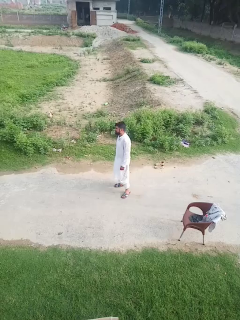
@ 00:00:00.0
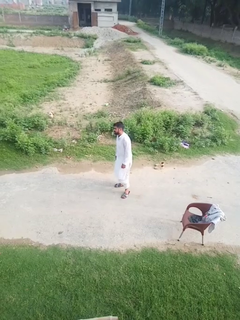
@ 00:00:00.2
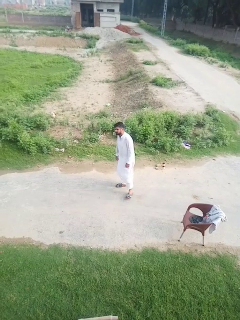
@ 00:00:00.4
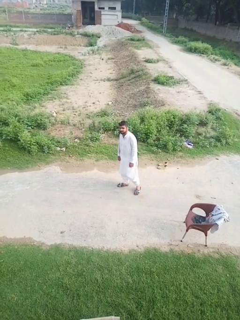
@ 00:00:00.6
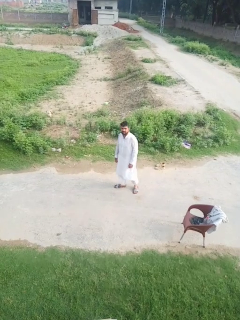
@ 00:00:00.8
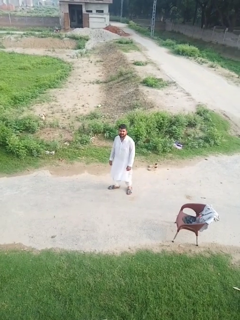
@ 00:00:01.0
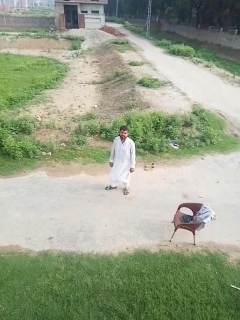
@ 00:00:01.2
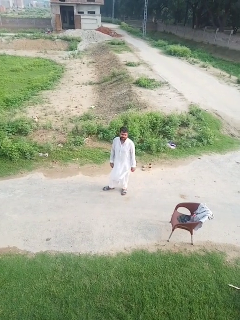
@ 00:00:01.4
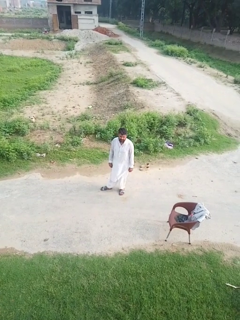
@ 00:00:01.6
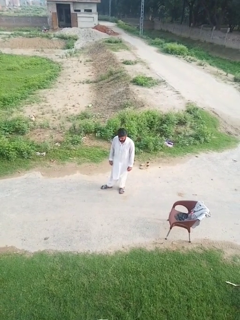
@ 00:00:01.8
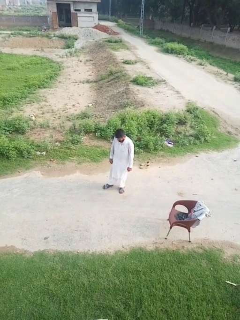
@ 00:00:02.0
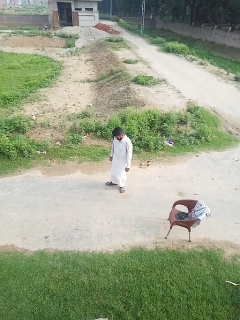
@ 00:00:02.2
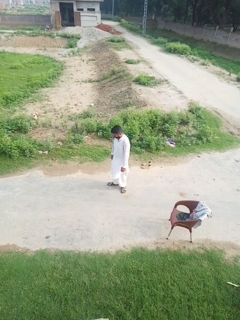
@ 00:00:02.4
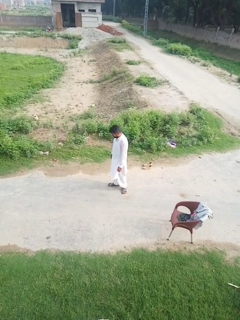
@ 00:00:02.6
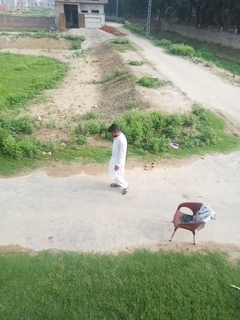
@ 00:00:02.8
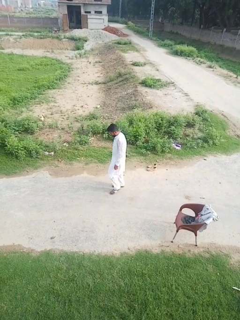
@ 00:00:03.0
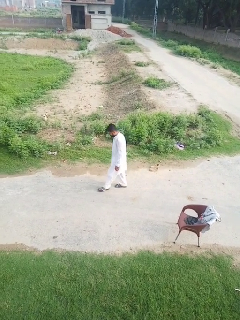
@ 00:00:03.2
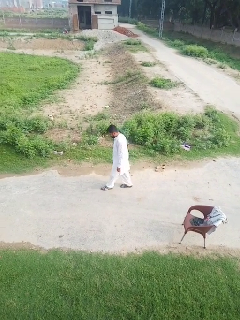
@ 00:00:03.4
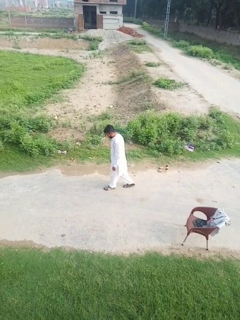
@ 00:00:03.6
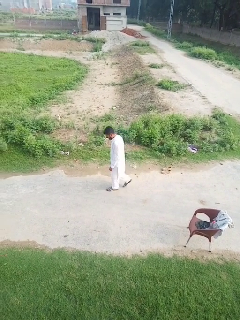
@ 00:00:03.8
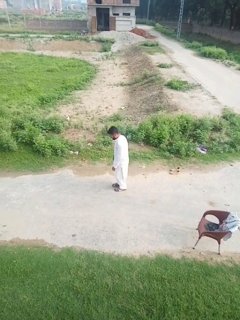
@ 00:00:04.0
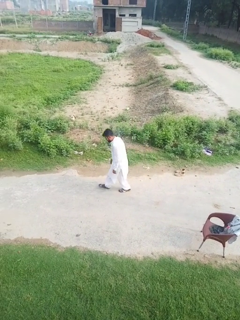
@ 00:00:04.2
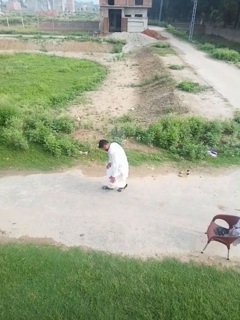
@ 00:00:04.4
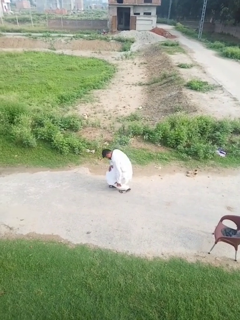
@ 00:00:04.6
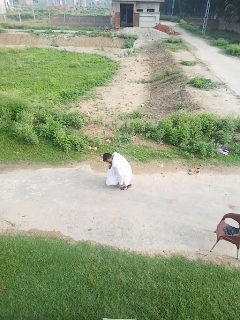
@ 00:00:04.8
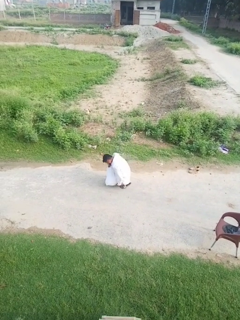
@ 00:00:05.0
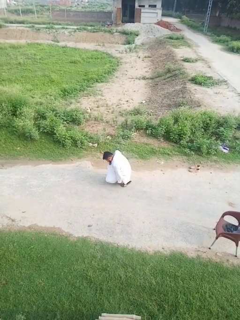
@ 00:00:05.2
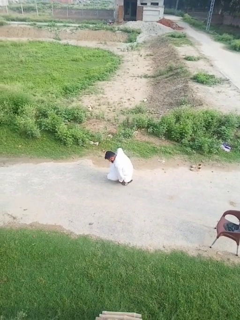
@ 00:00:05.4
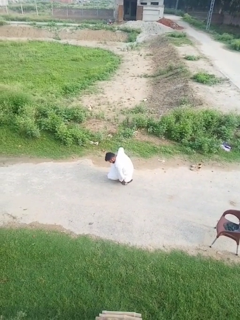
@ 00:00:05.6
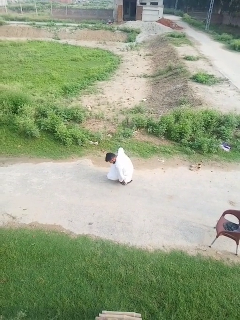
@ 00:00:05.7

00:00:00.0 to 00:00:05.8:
person trips on object on floor

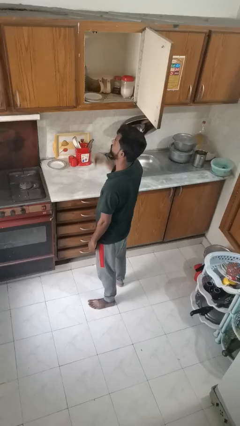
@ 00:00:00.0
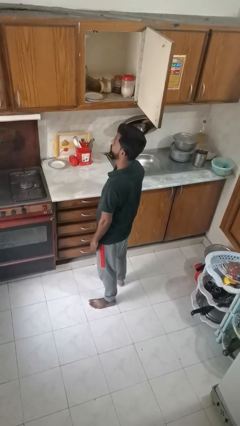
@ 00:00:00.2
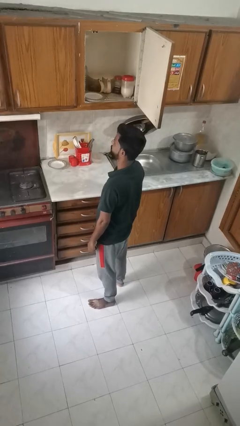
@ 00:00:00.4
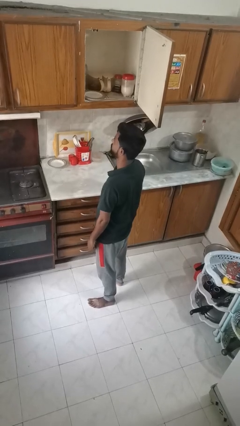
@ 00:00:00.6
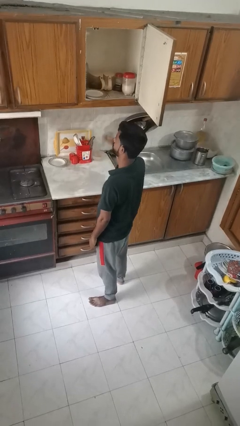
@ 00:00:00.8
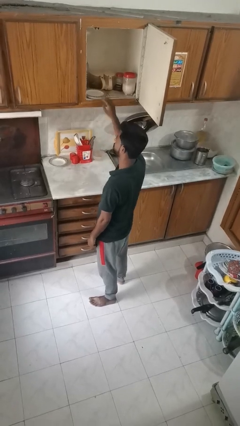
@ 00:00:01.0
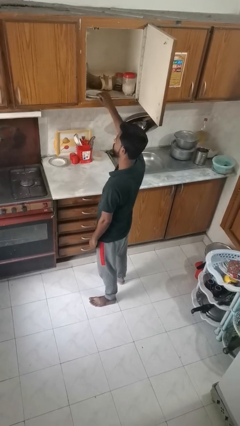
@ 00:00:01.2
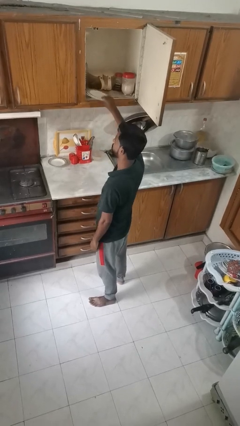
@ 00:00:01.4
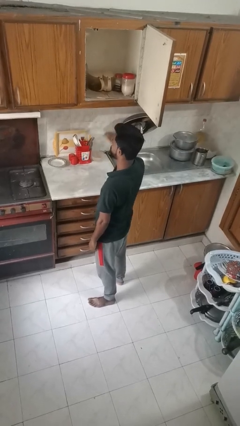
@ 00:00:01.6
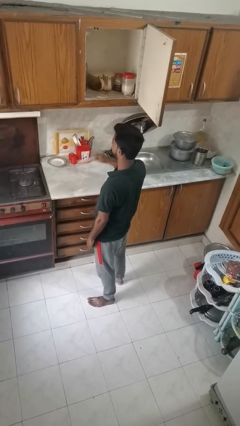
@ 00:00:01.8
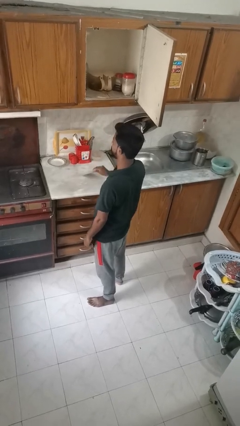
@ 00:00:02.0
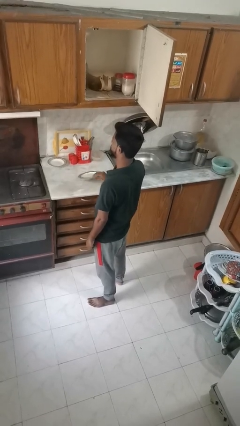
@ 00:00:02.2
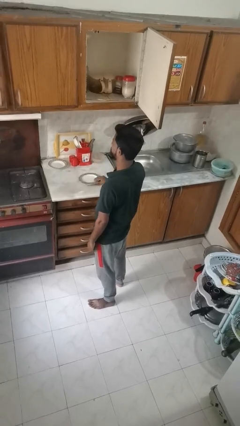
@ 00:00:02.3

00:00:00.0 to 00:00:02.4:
person takes object from cabinet

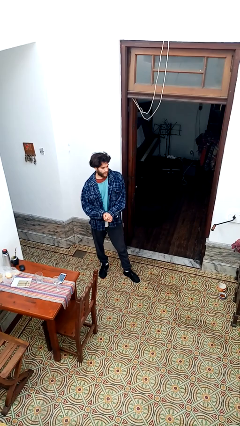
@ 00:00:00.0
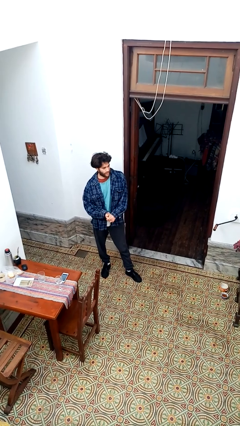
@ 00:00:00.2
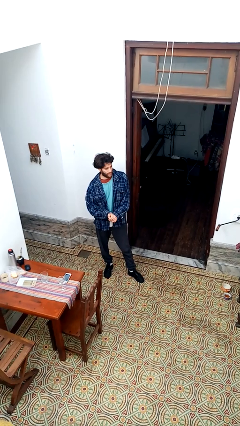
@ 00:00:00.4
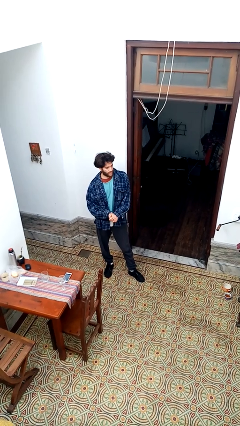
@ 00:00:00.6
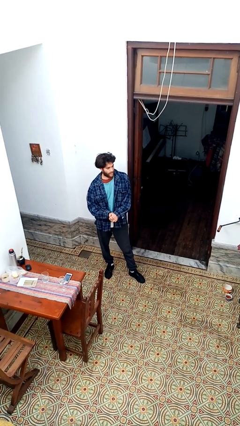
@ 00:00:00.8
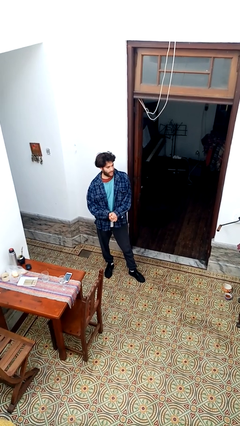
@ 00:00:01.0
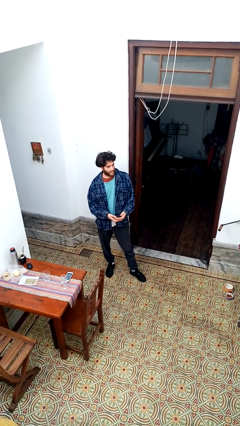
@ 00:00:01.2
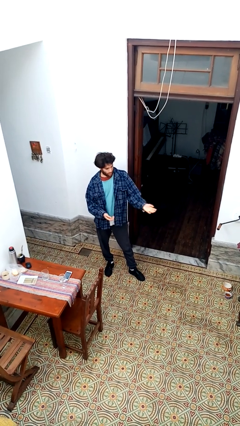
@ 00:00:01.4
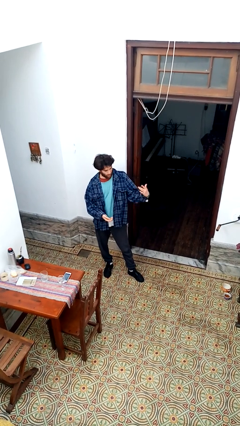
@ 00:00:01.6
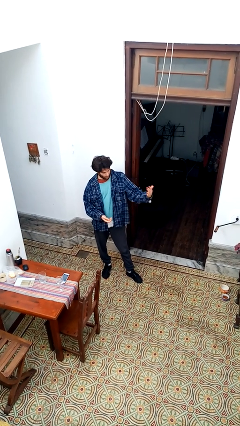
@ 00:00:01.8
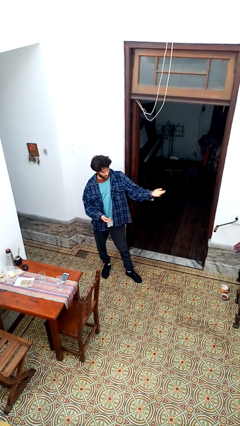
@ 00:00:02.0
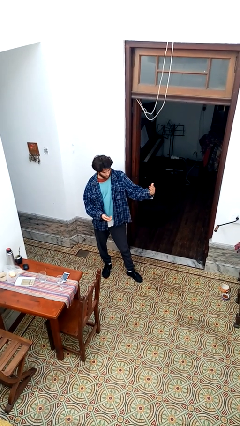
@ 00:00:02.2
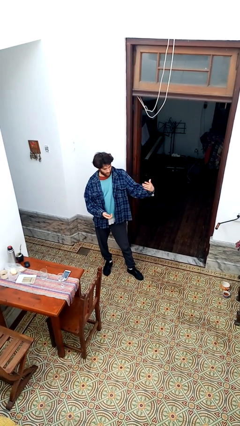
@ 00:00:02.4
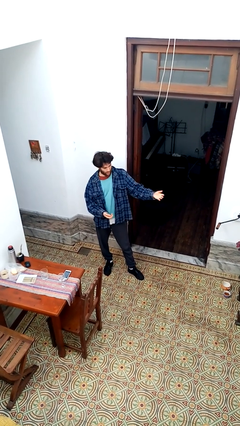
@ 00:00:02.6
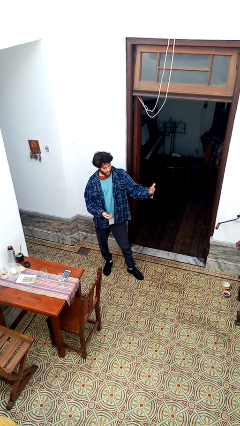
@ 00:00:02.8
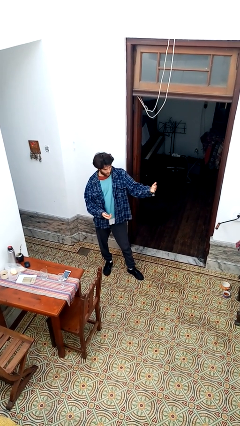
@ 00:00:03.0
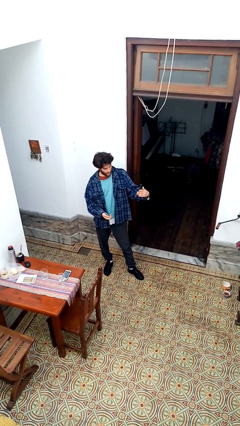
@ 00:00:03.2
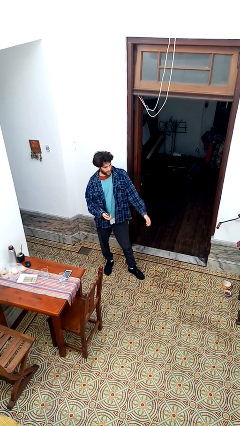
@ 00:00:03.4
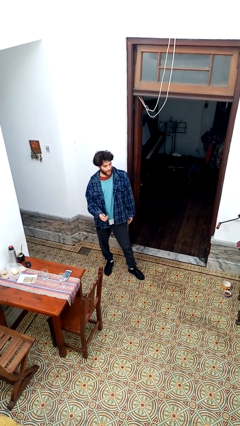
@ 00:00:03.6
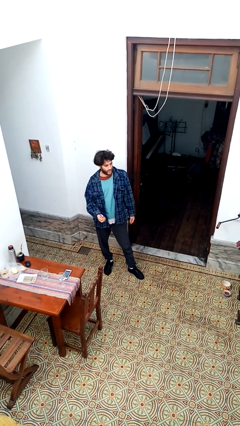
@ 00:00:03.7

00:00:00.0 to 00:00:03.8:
person gestures come here

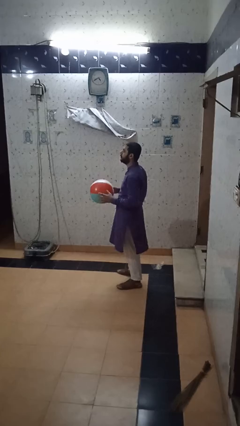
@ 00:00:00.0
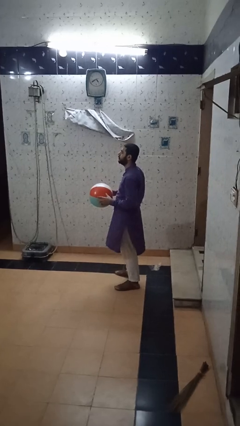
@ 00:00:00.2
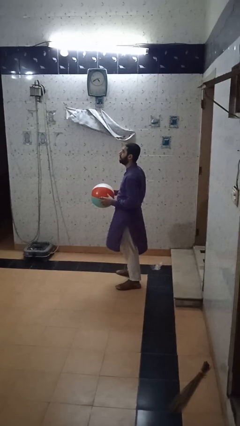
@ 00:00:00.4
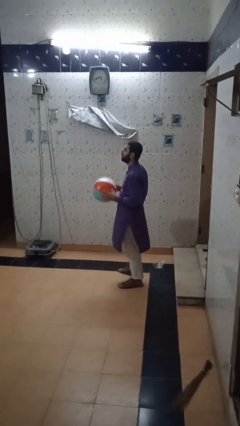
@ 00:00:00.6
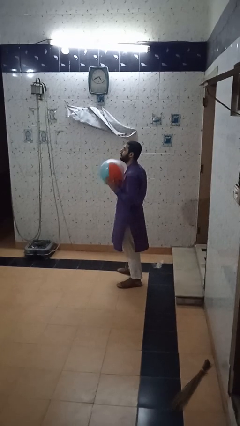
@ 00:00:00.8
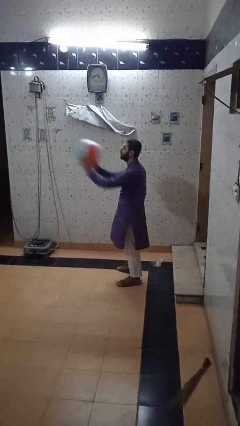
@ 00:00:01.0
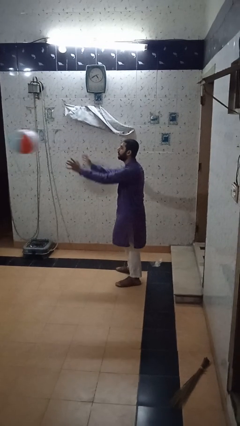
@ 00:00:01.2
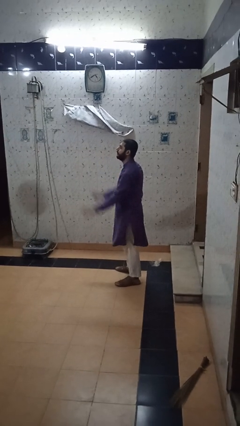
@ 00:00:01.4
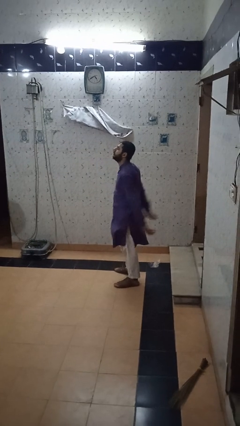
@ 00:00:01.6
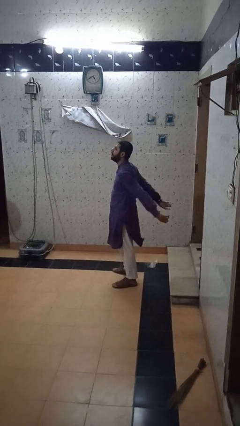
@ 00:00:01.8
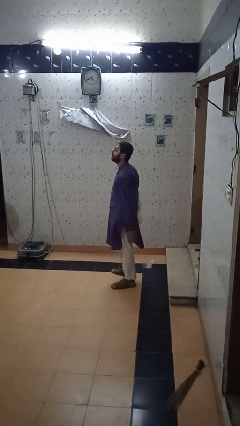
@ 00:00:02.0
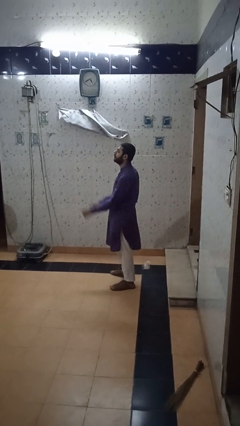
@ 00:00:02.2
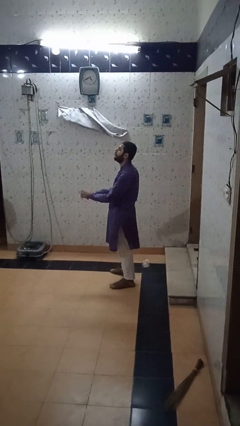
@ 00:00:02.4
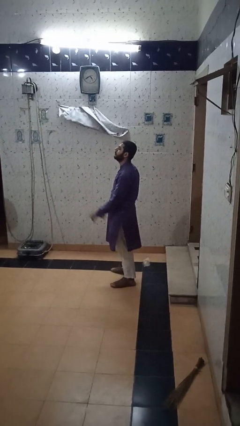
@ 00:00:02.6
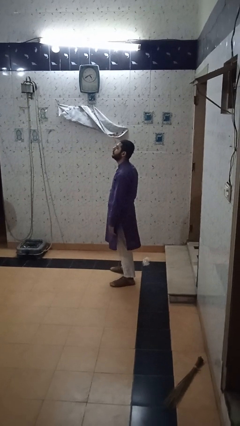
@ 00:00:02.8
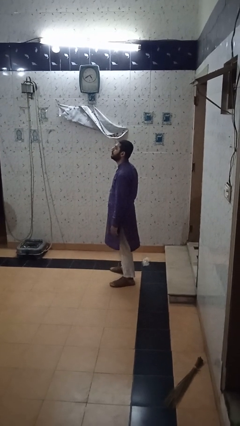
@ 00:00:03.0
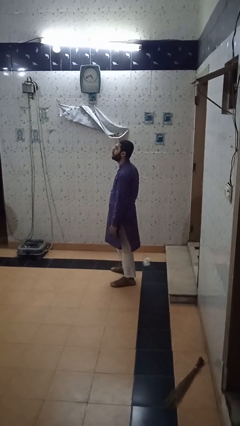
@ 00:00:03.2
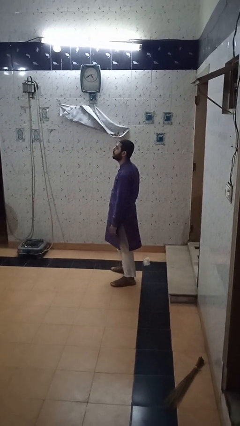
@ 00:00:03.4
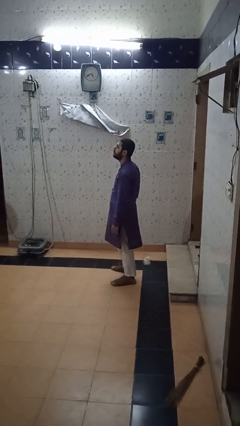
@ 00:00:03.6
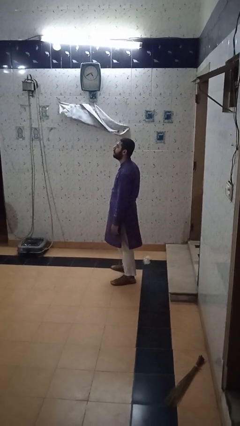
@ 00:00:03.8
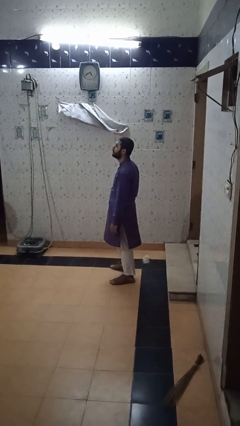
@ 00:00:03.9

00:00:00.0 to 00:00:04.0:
person throws object to person

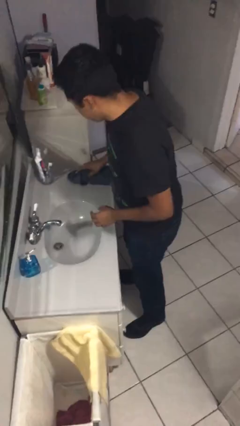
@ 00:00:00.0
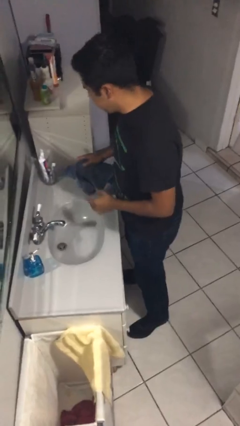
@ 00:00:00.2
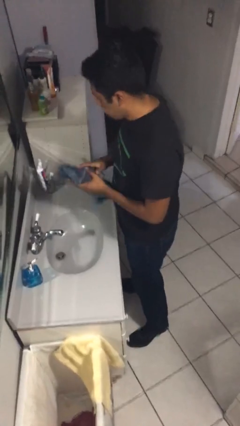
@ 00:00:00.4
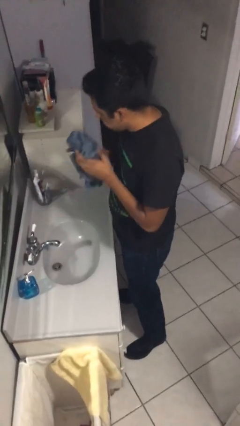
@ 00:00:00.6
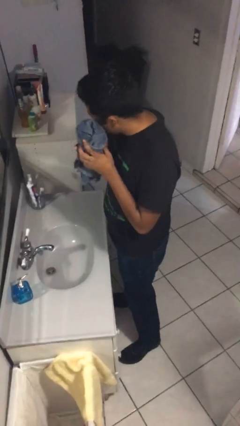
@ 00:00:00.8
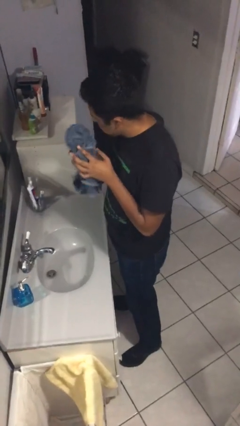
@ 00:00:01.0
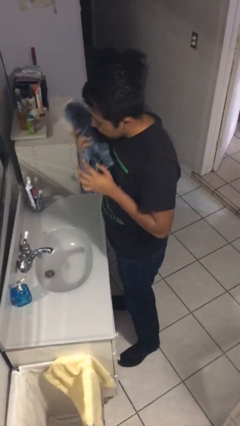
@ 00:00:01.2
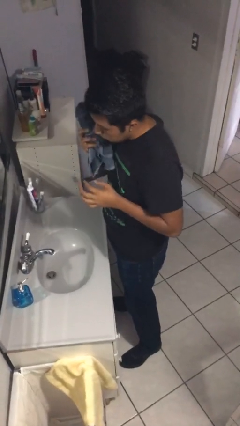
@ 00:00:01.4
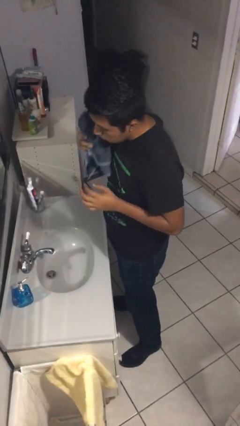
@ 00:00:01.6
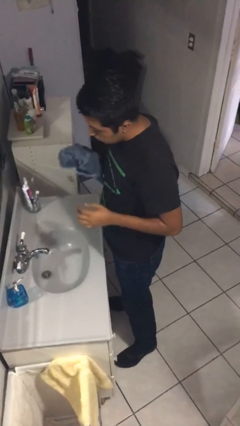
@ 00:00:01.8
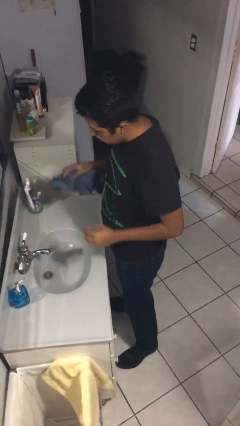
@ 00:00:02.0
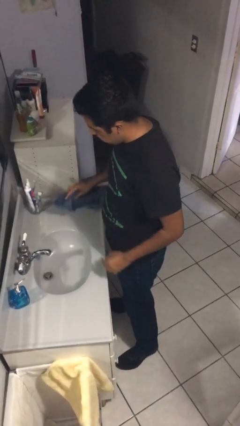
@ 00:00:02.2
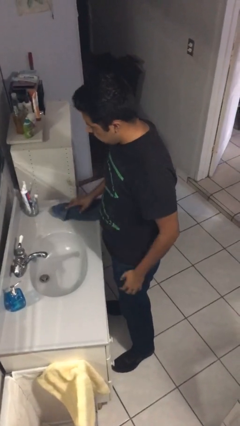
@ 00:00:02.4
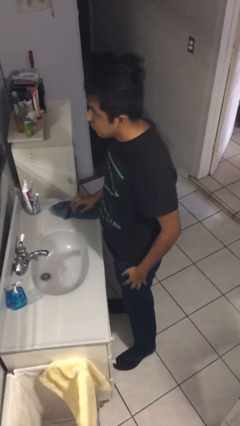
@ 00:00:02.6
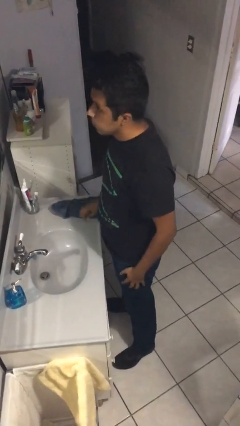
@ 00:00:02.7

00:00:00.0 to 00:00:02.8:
person dries face with towel
